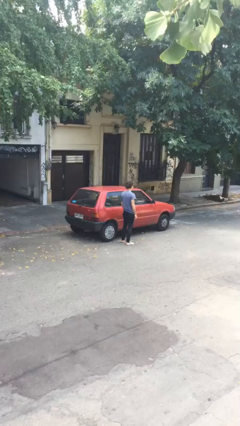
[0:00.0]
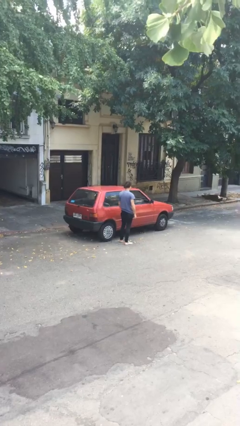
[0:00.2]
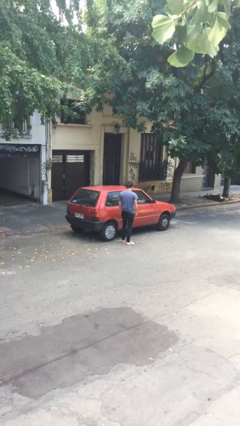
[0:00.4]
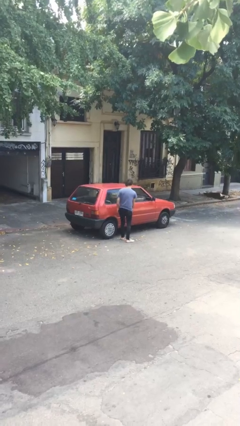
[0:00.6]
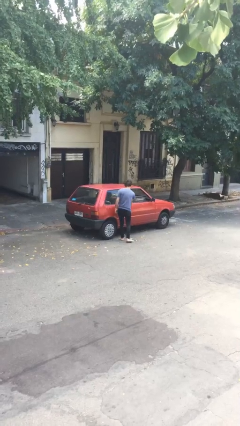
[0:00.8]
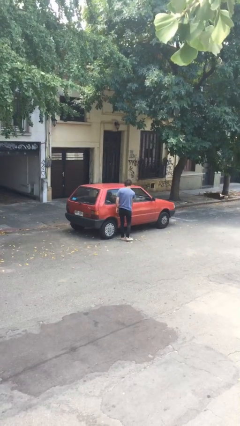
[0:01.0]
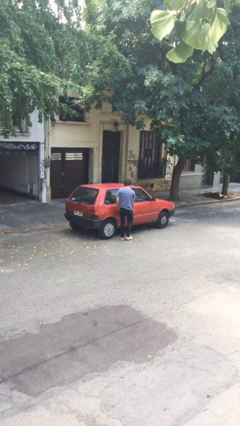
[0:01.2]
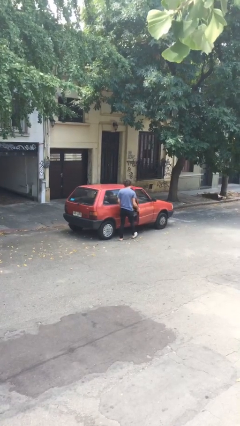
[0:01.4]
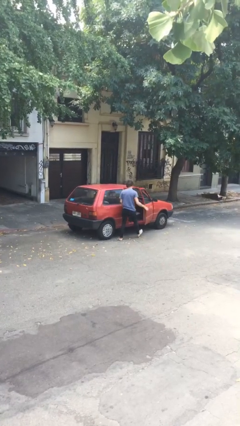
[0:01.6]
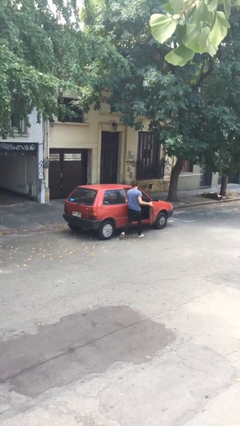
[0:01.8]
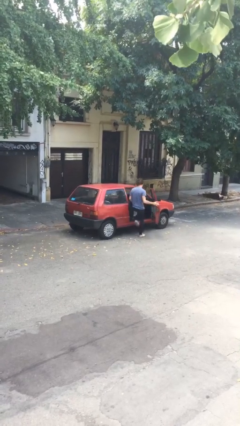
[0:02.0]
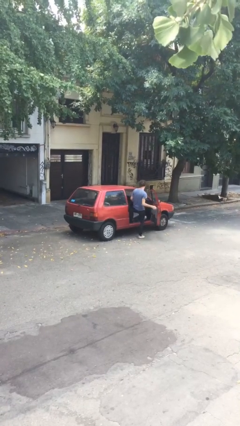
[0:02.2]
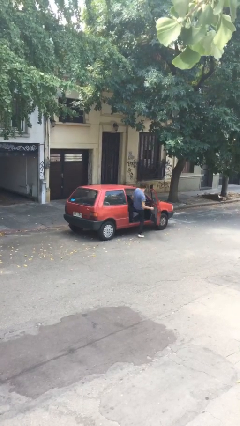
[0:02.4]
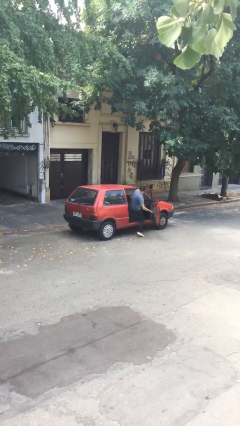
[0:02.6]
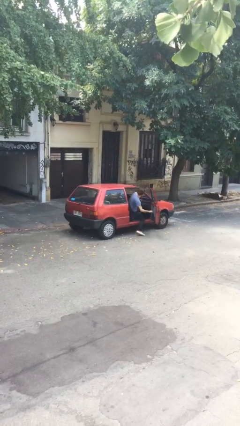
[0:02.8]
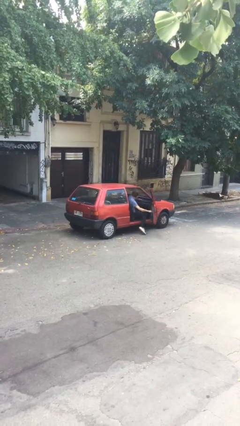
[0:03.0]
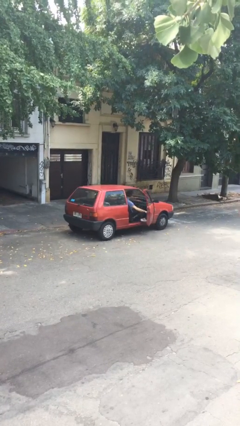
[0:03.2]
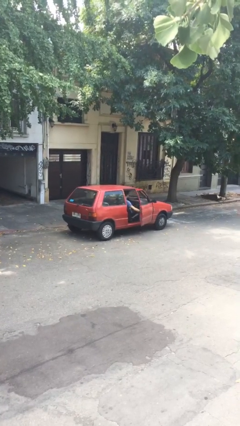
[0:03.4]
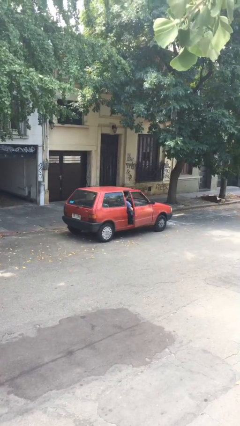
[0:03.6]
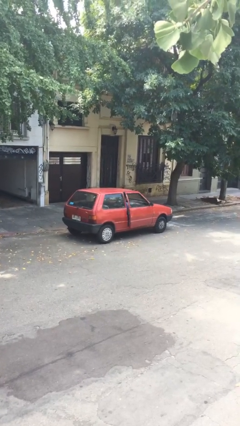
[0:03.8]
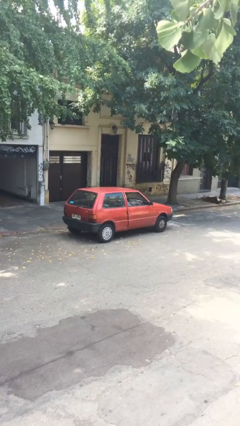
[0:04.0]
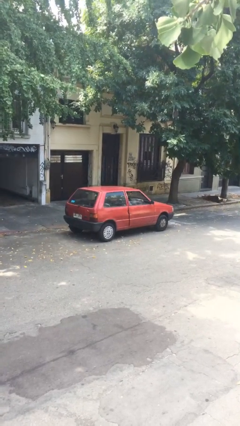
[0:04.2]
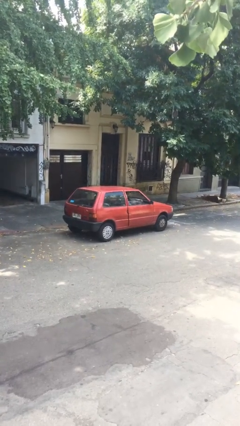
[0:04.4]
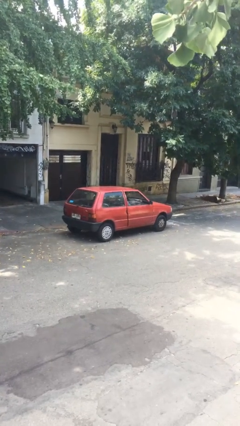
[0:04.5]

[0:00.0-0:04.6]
car picks up person

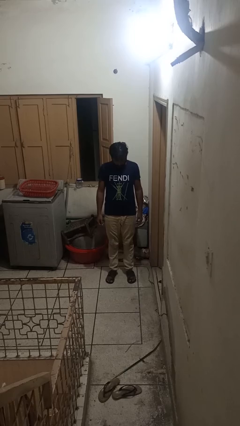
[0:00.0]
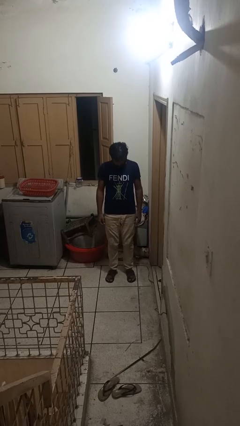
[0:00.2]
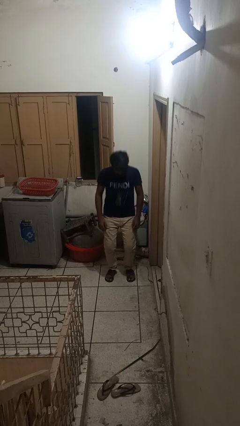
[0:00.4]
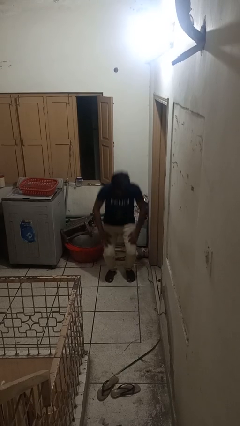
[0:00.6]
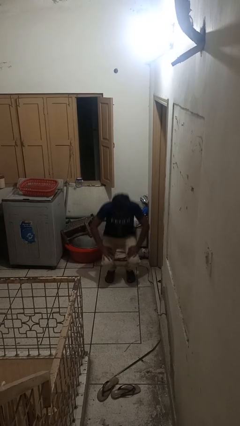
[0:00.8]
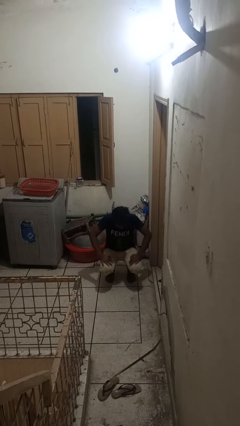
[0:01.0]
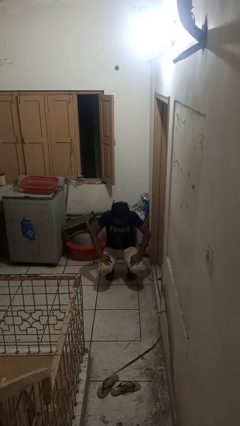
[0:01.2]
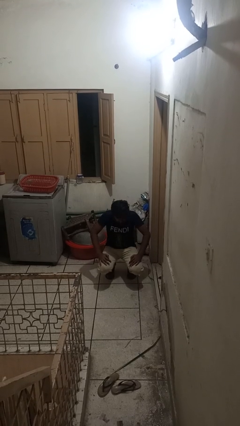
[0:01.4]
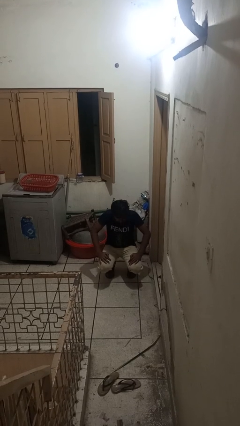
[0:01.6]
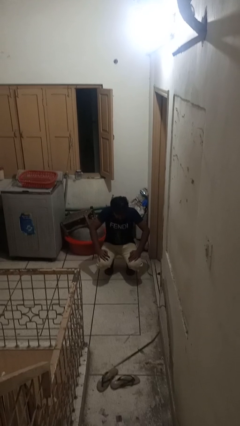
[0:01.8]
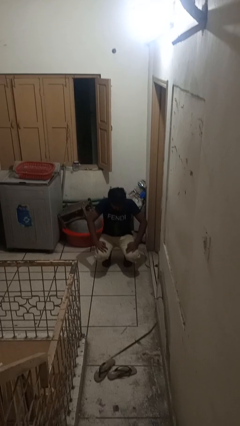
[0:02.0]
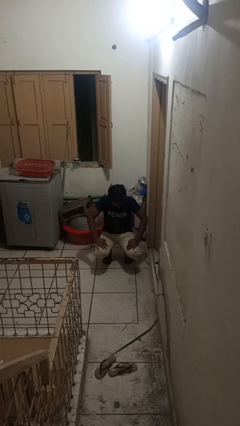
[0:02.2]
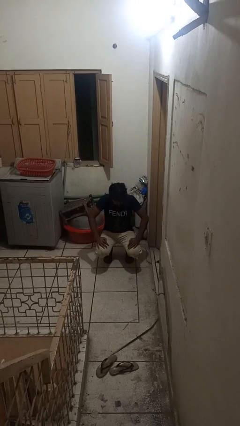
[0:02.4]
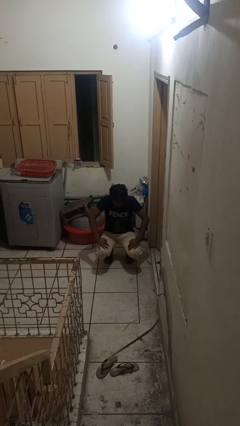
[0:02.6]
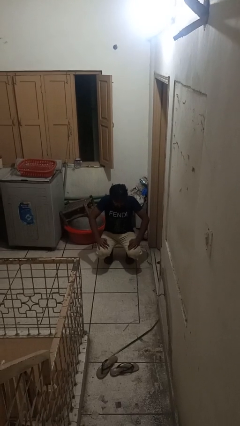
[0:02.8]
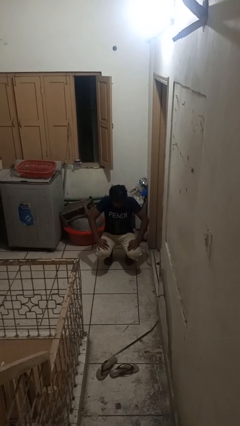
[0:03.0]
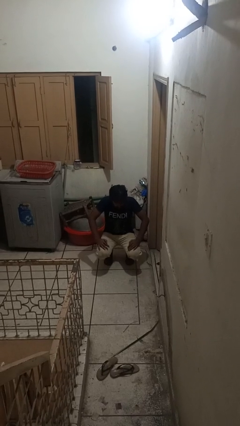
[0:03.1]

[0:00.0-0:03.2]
person squats

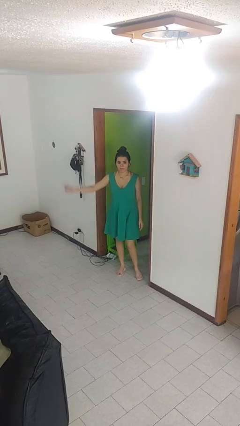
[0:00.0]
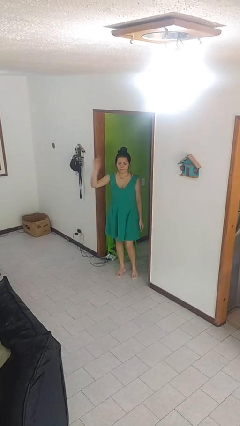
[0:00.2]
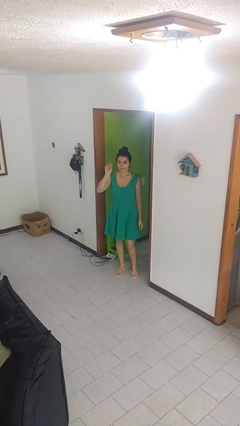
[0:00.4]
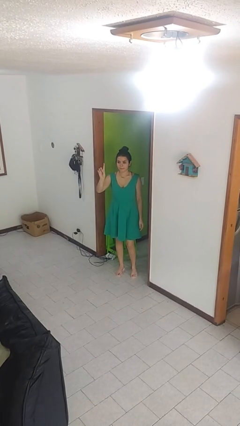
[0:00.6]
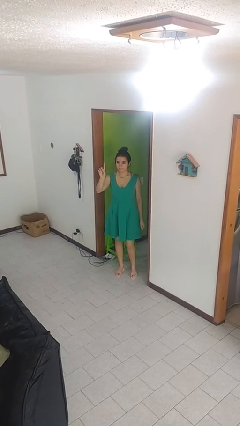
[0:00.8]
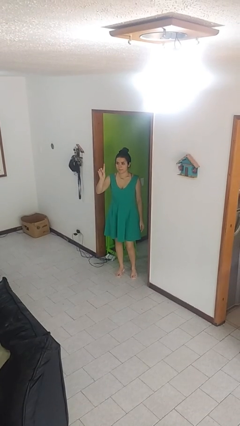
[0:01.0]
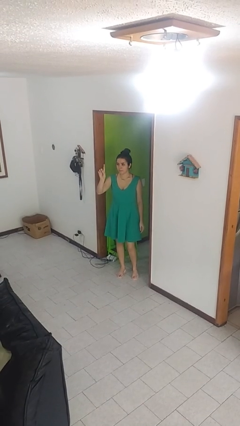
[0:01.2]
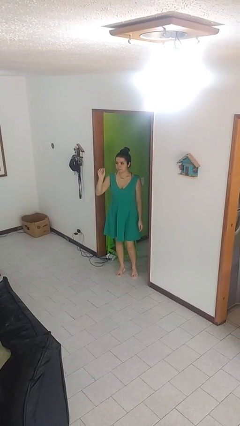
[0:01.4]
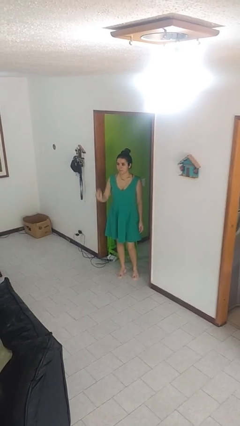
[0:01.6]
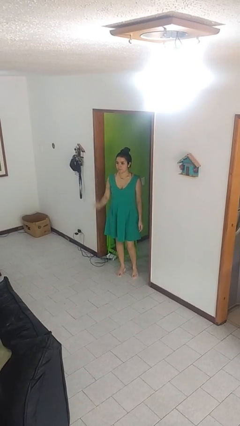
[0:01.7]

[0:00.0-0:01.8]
person gestures number one

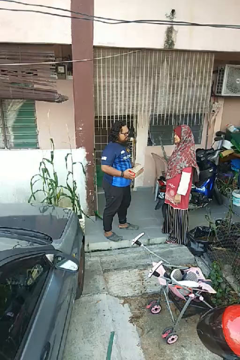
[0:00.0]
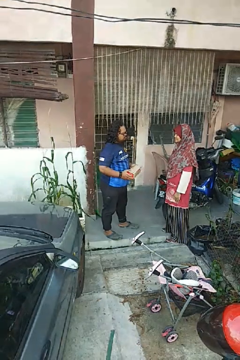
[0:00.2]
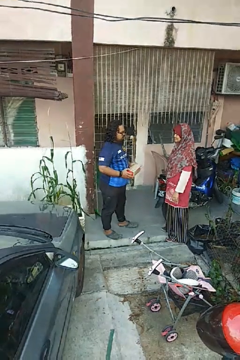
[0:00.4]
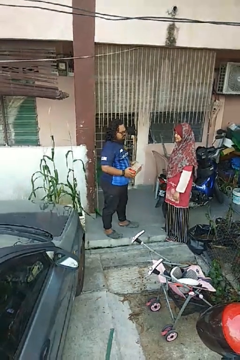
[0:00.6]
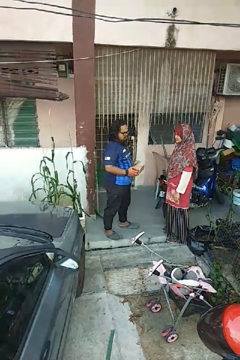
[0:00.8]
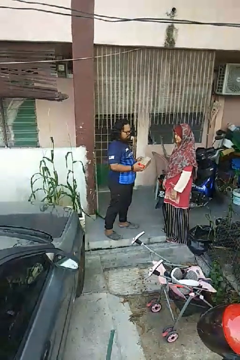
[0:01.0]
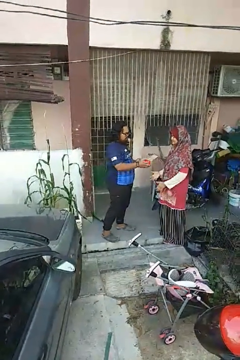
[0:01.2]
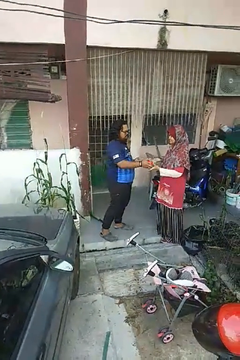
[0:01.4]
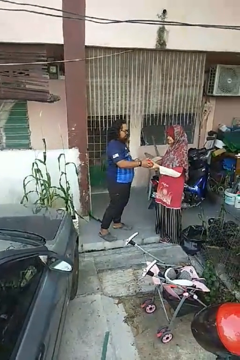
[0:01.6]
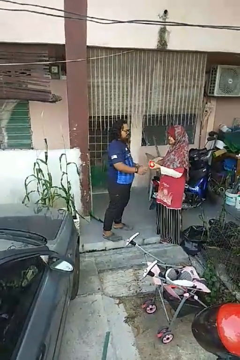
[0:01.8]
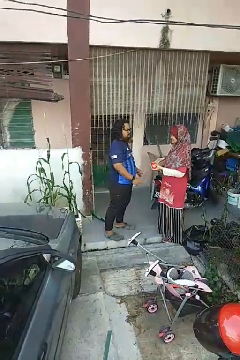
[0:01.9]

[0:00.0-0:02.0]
person transfers object to person

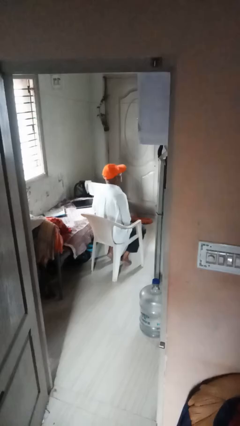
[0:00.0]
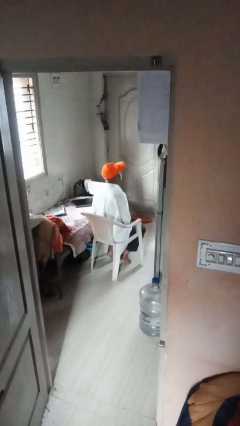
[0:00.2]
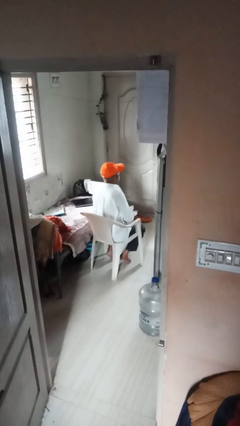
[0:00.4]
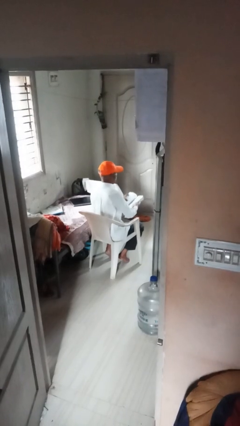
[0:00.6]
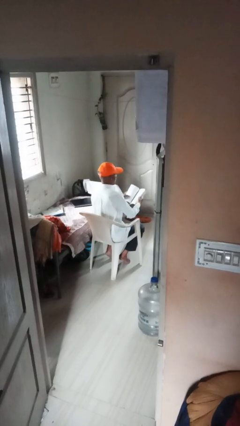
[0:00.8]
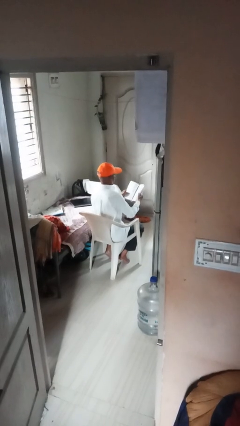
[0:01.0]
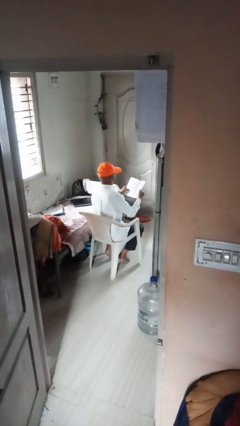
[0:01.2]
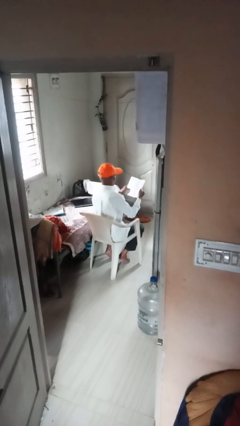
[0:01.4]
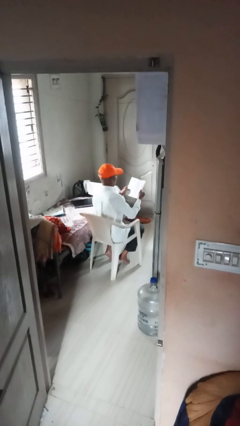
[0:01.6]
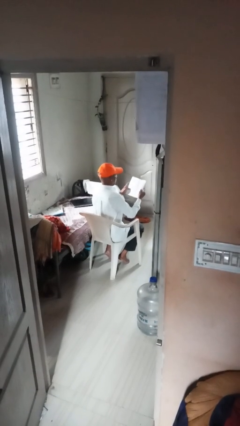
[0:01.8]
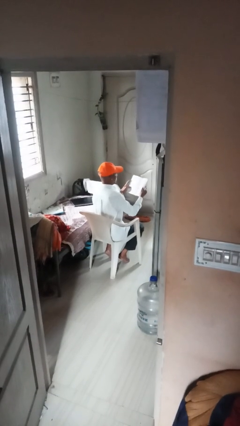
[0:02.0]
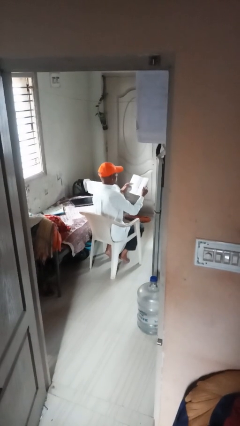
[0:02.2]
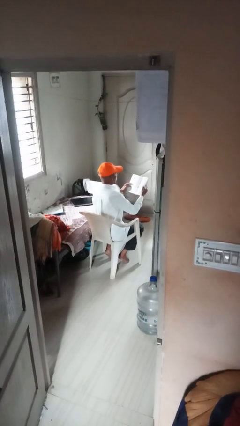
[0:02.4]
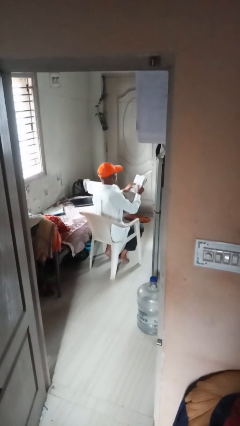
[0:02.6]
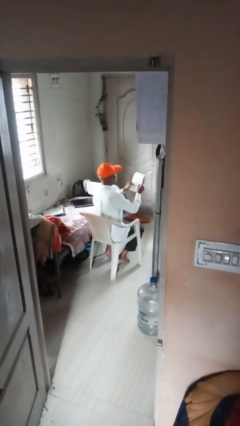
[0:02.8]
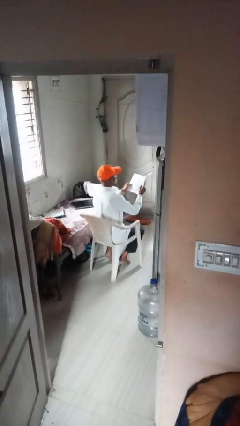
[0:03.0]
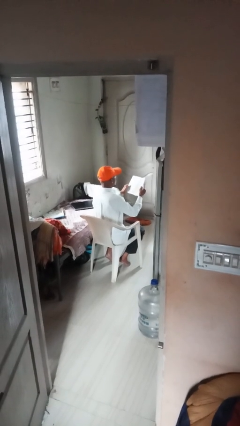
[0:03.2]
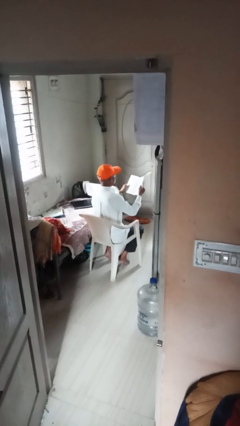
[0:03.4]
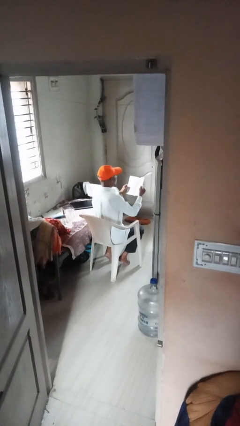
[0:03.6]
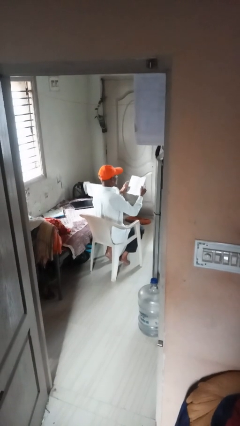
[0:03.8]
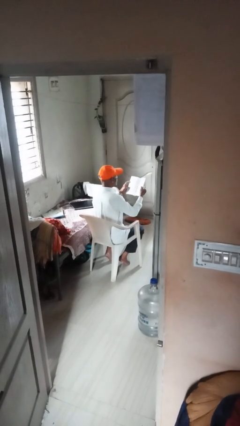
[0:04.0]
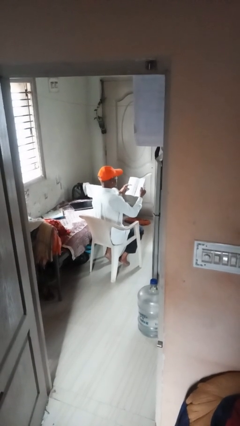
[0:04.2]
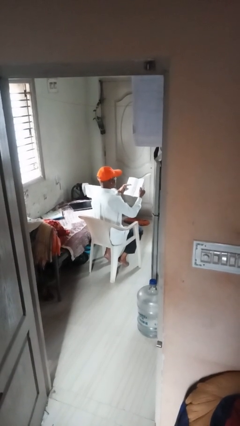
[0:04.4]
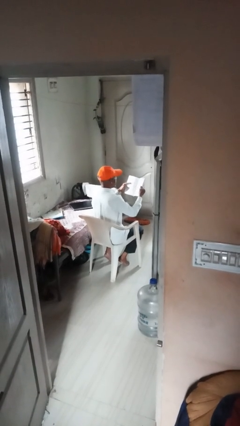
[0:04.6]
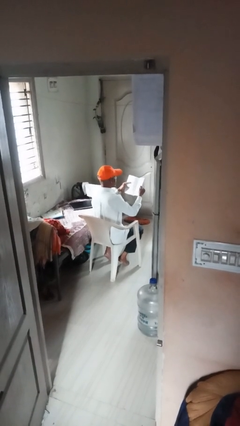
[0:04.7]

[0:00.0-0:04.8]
person reads book

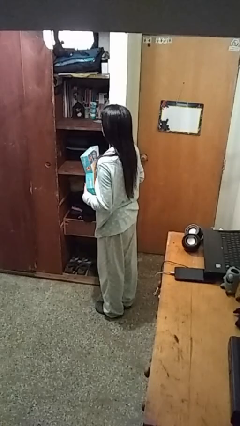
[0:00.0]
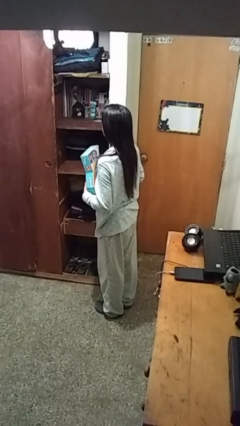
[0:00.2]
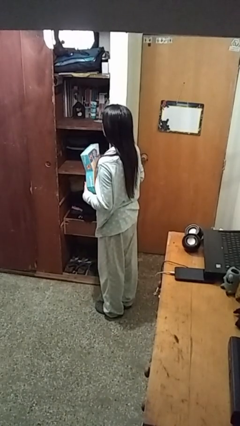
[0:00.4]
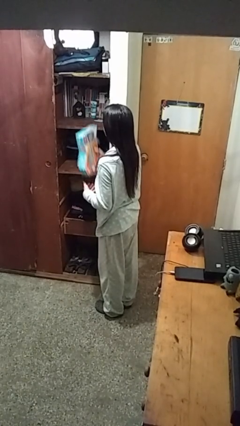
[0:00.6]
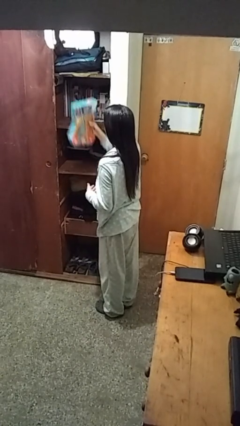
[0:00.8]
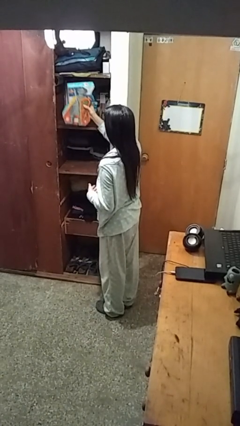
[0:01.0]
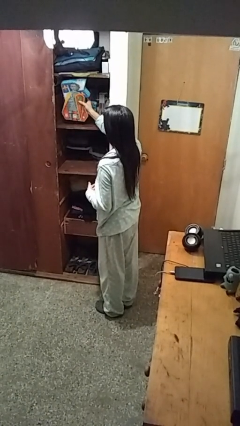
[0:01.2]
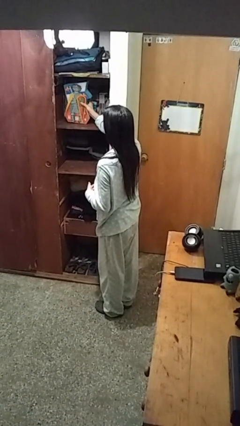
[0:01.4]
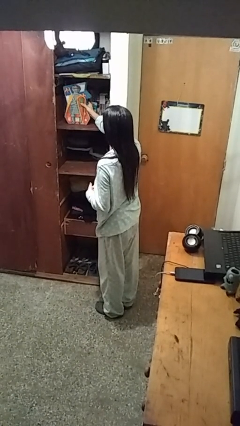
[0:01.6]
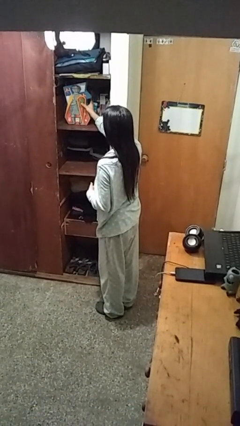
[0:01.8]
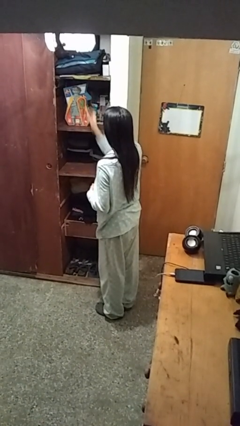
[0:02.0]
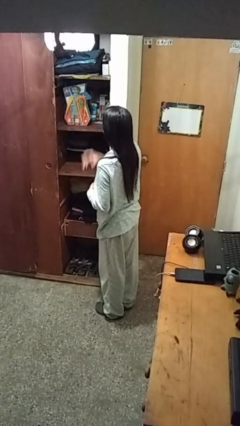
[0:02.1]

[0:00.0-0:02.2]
person picks up object from shelf
